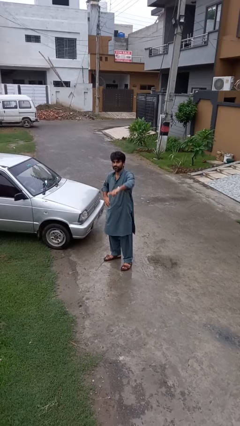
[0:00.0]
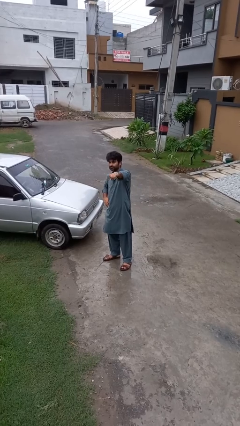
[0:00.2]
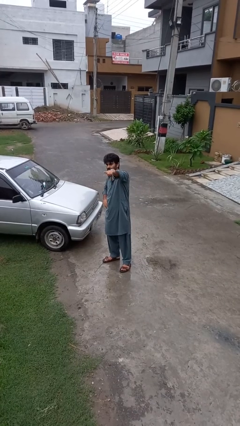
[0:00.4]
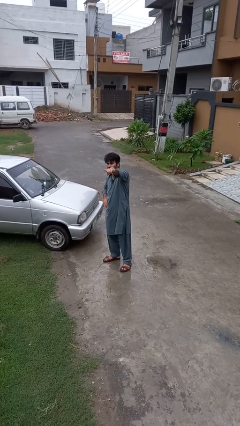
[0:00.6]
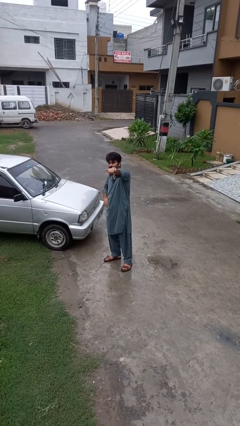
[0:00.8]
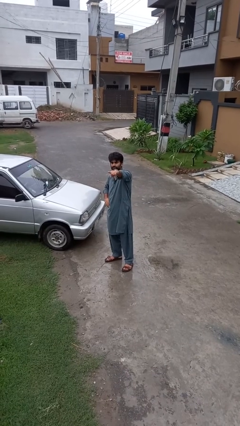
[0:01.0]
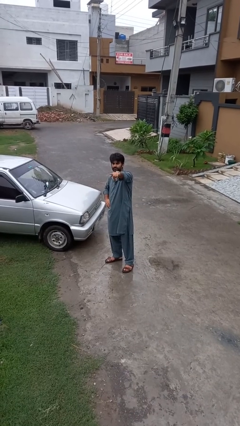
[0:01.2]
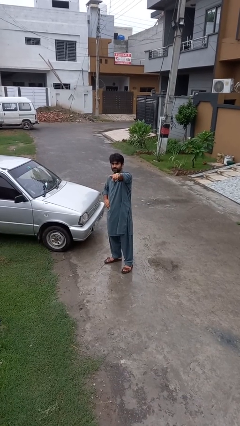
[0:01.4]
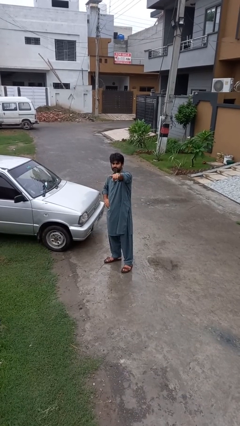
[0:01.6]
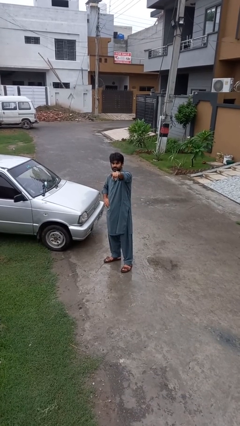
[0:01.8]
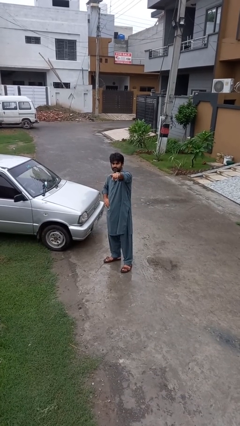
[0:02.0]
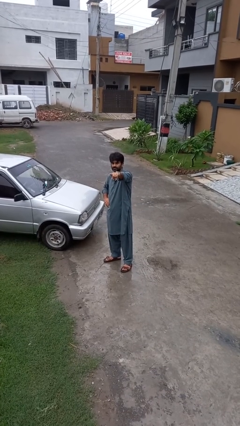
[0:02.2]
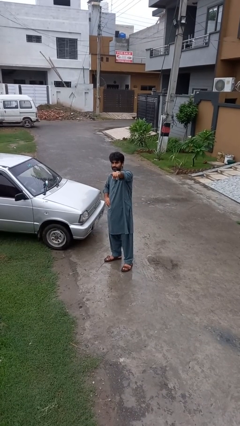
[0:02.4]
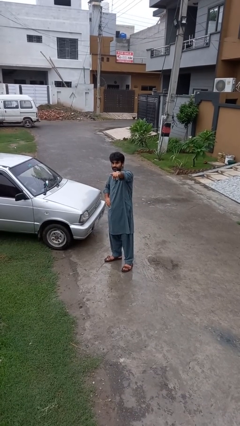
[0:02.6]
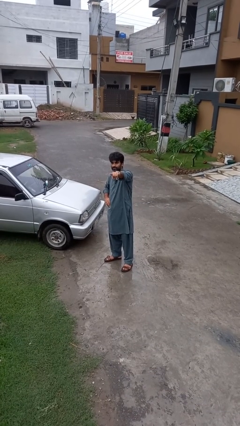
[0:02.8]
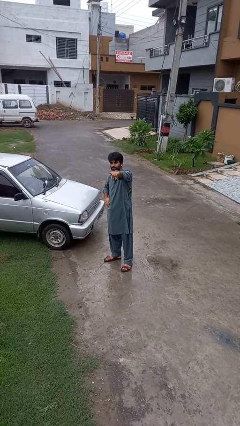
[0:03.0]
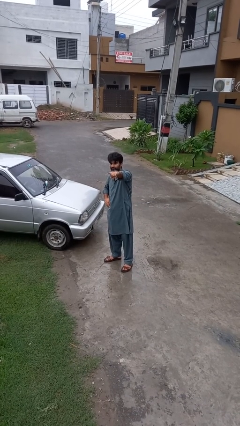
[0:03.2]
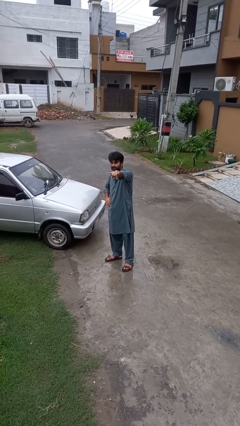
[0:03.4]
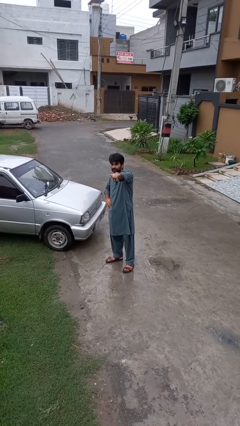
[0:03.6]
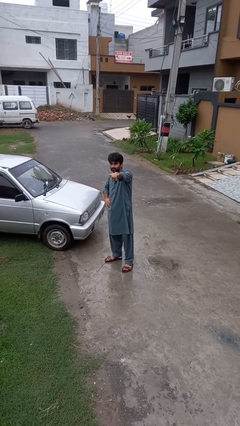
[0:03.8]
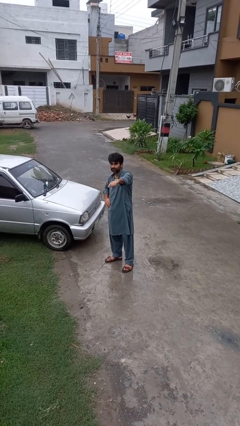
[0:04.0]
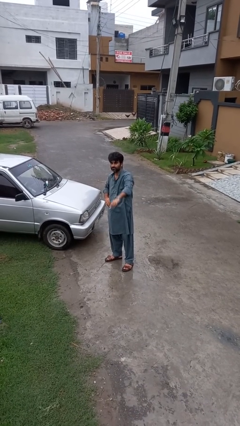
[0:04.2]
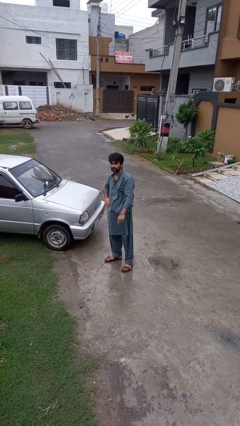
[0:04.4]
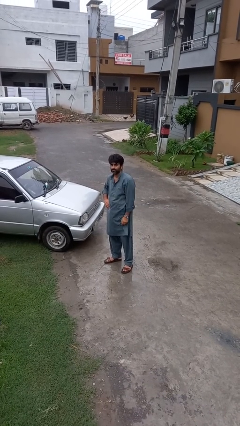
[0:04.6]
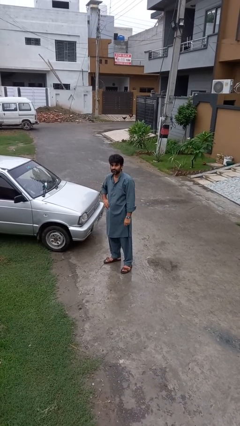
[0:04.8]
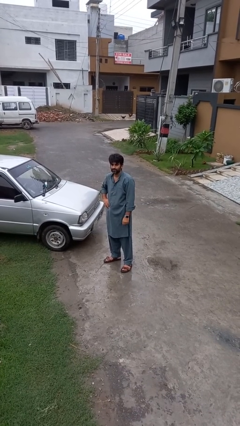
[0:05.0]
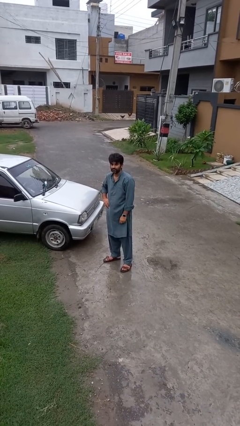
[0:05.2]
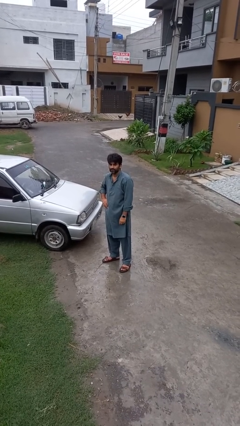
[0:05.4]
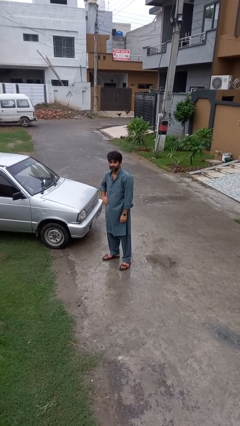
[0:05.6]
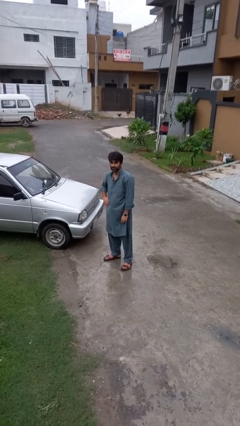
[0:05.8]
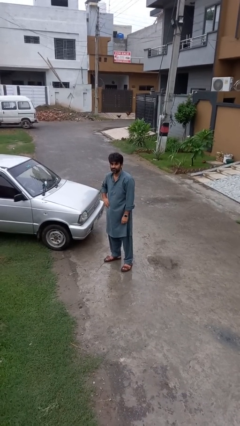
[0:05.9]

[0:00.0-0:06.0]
person points at person

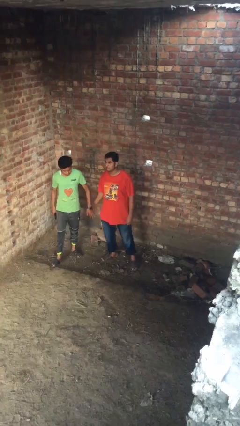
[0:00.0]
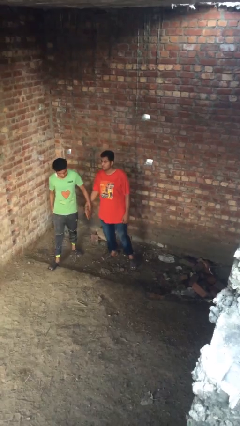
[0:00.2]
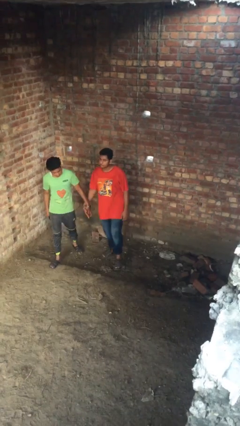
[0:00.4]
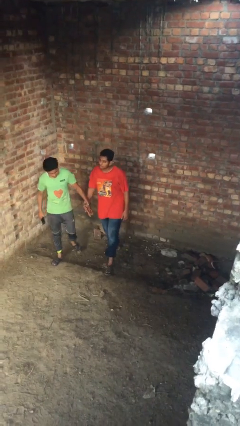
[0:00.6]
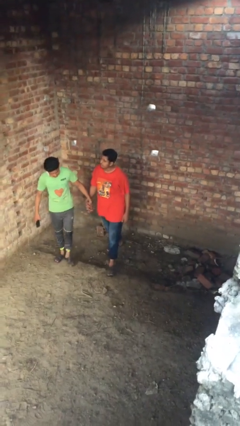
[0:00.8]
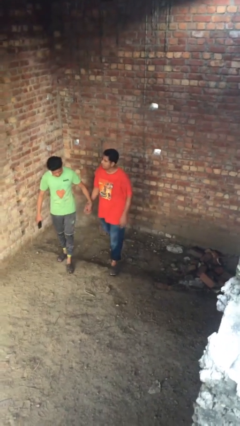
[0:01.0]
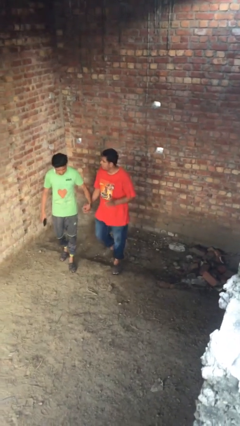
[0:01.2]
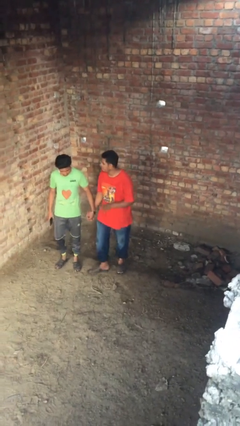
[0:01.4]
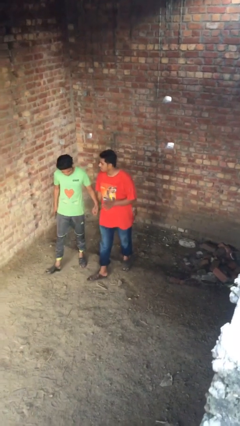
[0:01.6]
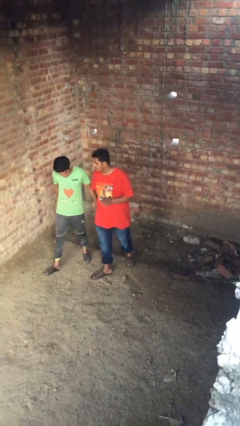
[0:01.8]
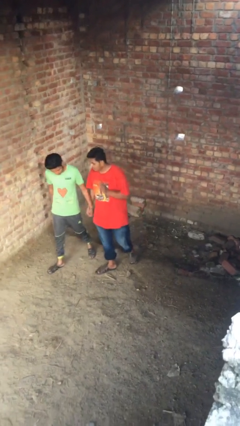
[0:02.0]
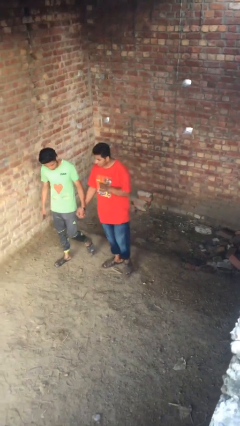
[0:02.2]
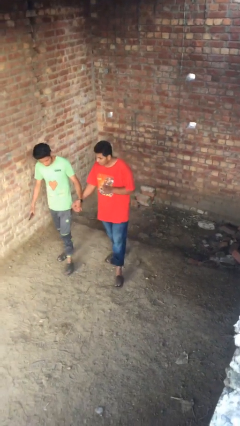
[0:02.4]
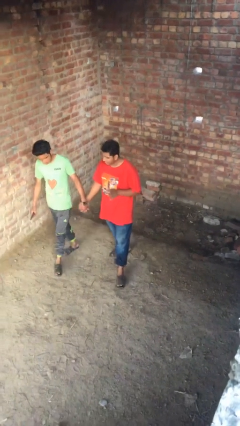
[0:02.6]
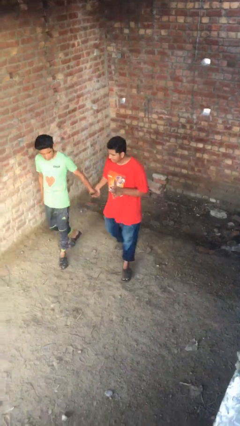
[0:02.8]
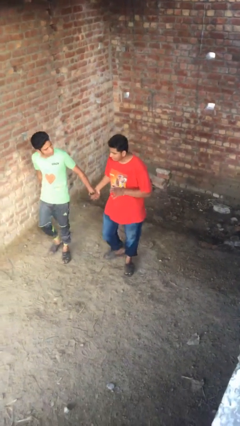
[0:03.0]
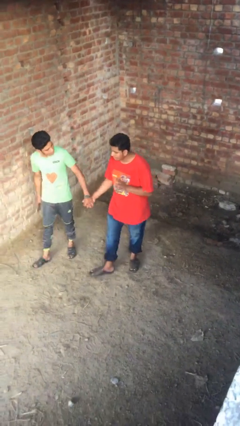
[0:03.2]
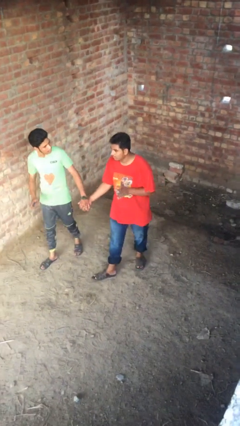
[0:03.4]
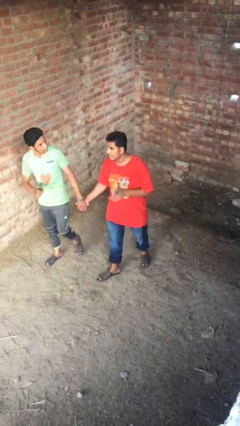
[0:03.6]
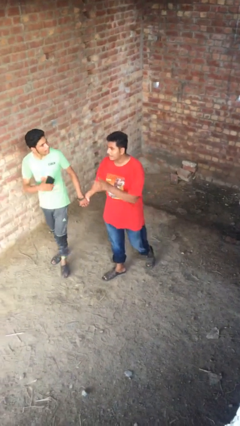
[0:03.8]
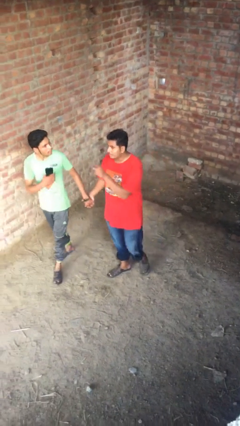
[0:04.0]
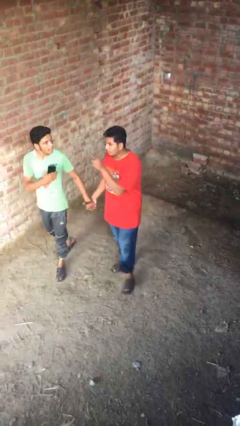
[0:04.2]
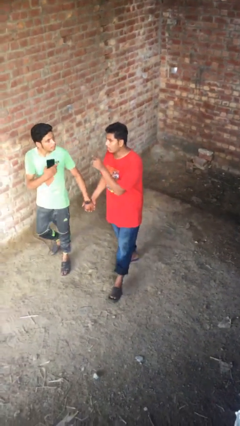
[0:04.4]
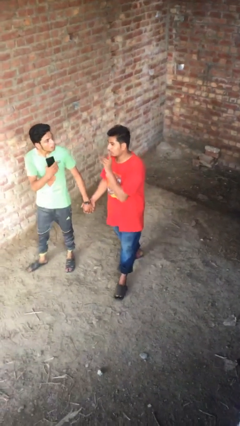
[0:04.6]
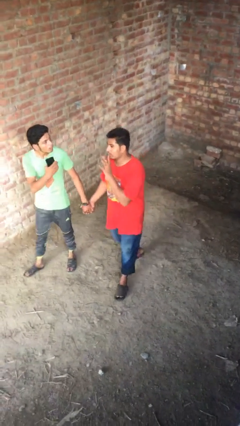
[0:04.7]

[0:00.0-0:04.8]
person holds hand

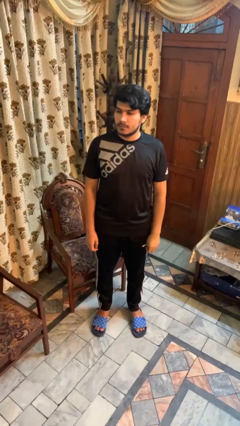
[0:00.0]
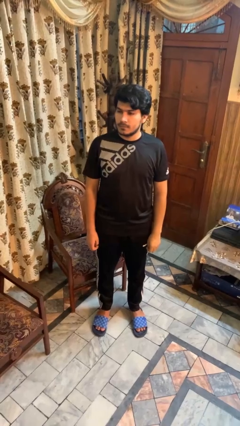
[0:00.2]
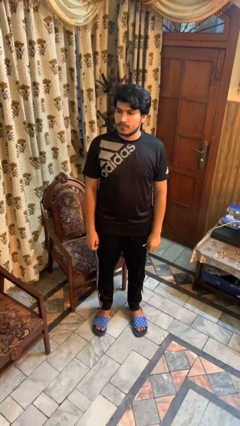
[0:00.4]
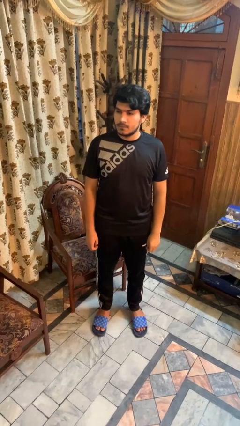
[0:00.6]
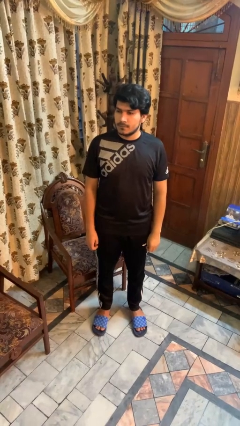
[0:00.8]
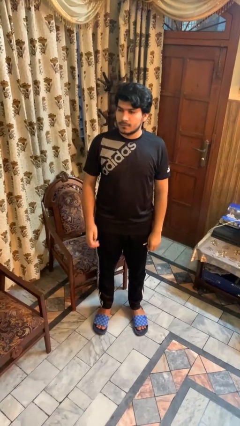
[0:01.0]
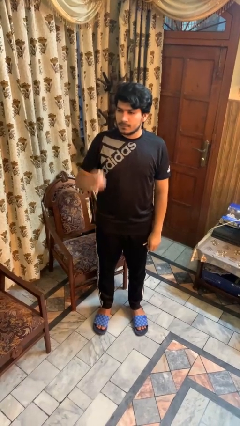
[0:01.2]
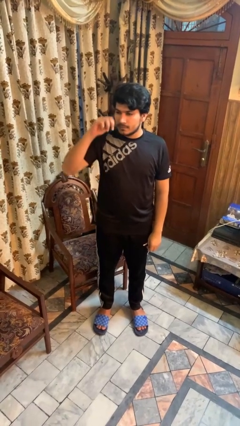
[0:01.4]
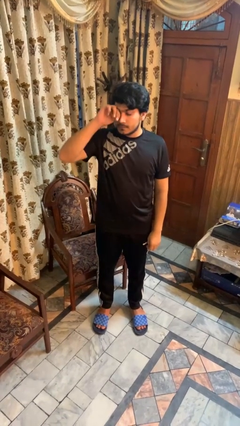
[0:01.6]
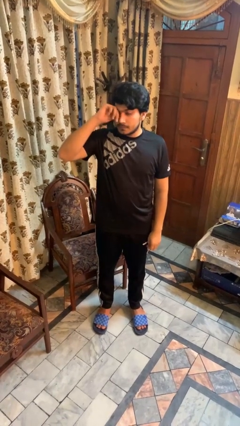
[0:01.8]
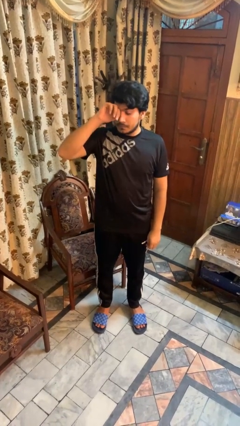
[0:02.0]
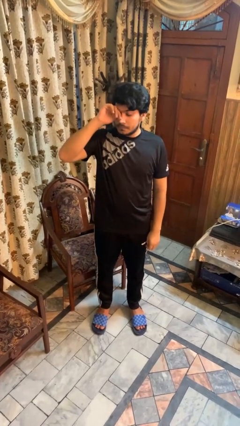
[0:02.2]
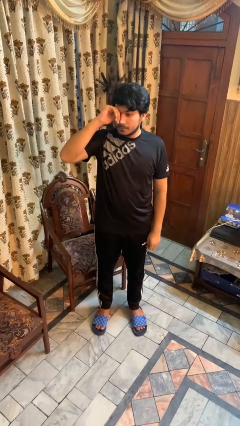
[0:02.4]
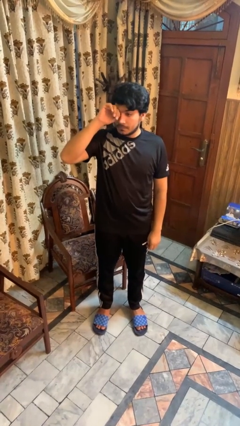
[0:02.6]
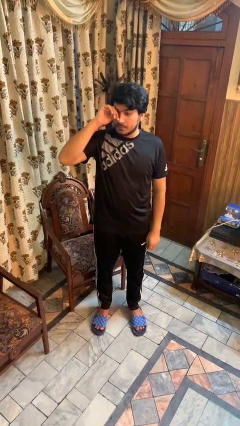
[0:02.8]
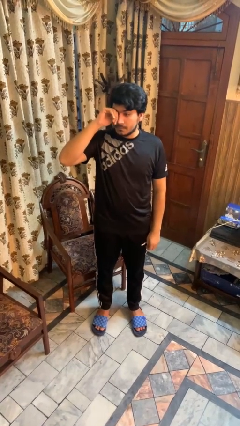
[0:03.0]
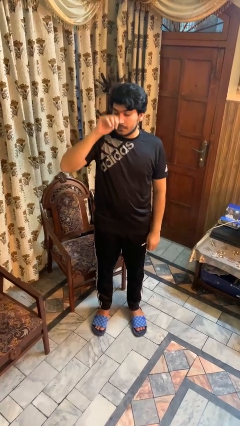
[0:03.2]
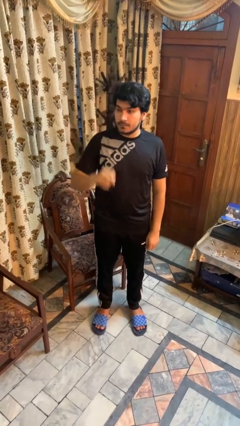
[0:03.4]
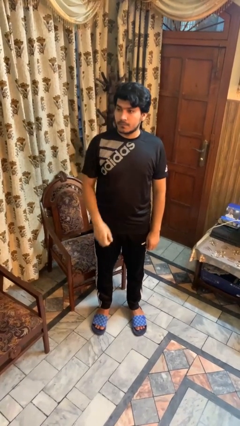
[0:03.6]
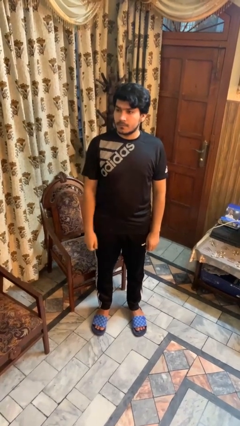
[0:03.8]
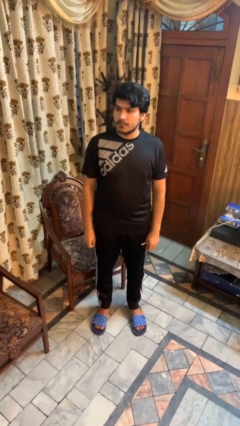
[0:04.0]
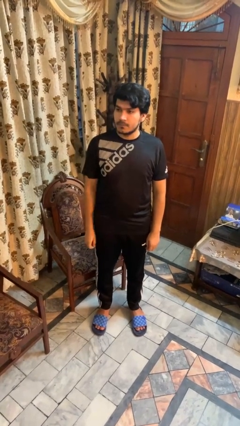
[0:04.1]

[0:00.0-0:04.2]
person rubs eyes

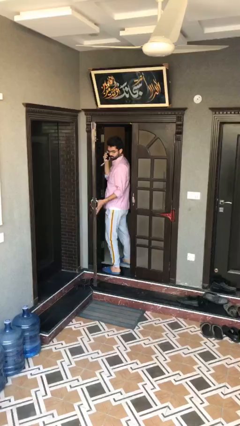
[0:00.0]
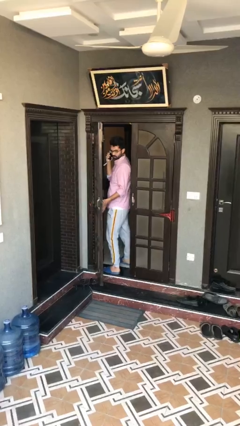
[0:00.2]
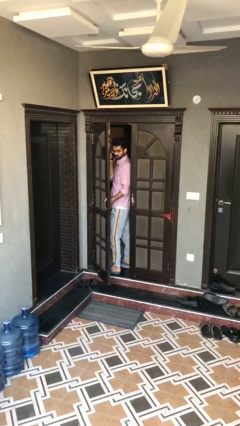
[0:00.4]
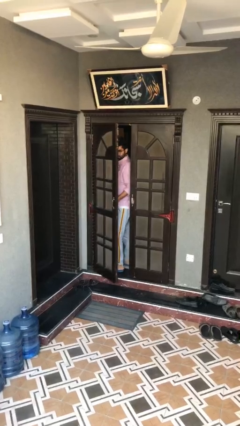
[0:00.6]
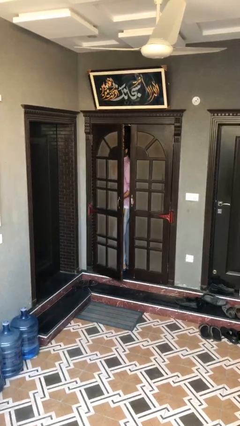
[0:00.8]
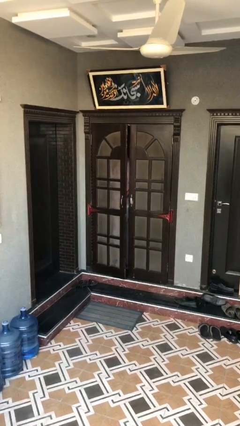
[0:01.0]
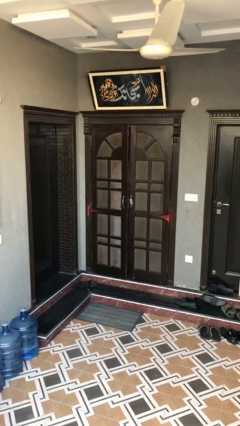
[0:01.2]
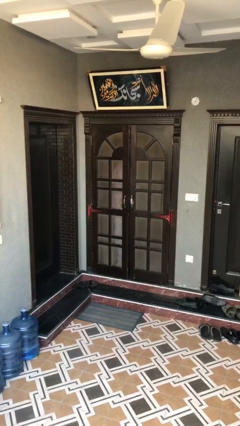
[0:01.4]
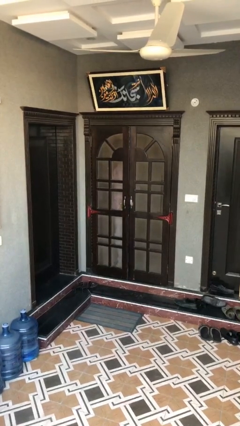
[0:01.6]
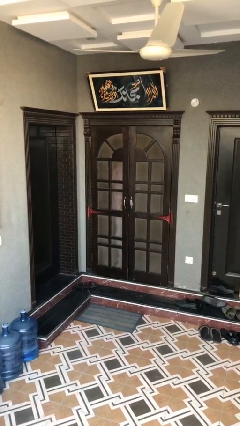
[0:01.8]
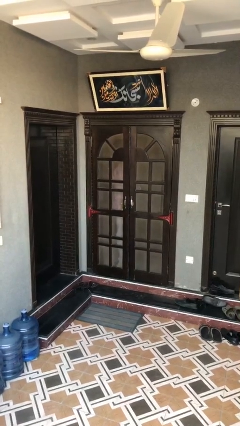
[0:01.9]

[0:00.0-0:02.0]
person closes facility door

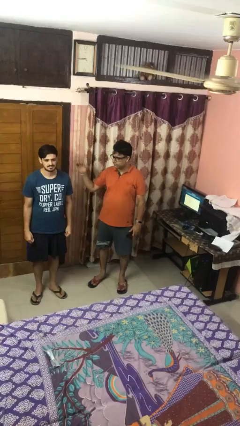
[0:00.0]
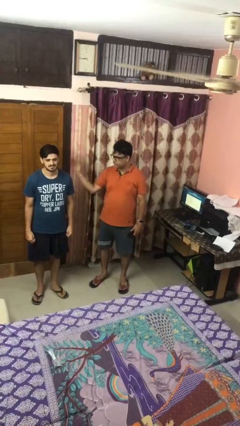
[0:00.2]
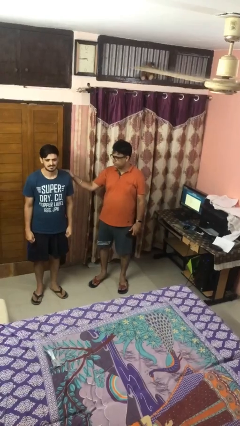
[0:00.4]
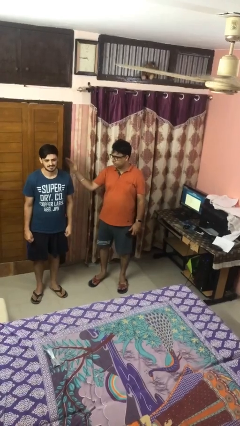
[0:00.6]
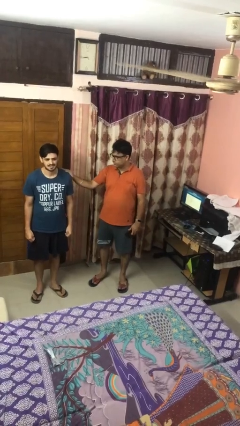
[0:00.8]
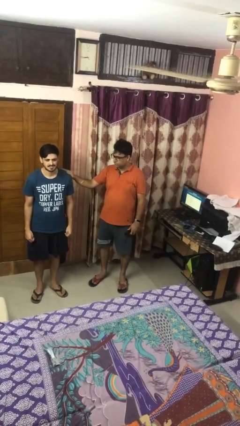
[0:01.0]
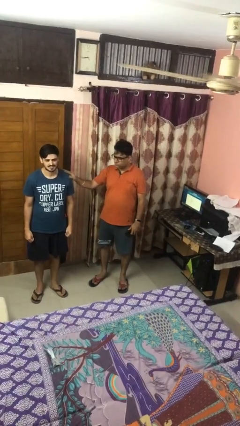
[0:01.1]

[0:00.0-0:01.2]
person pounds shoulders of person
